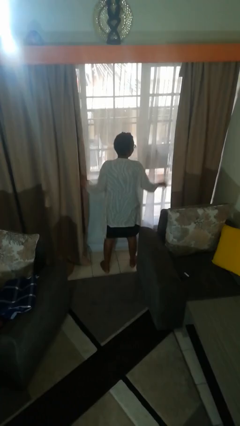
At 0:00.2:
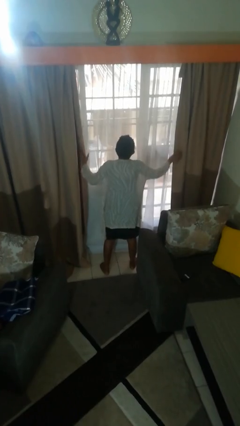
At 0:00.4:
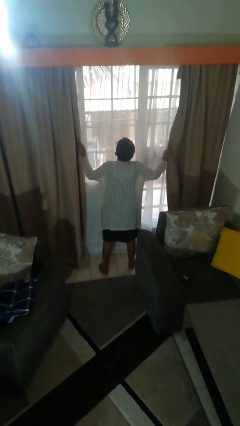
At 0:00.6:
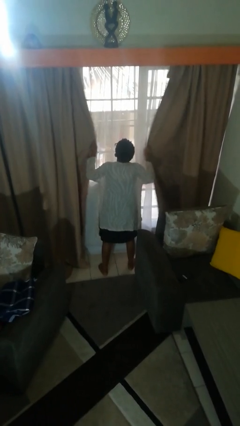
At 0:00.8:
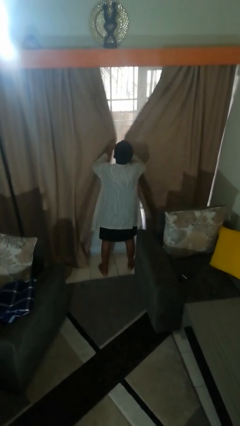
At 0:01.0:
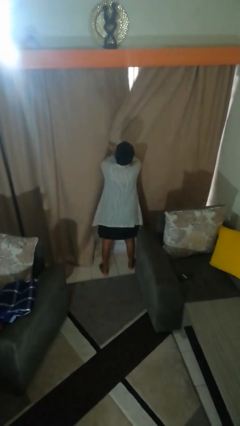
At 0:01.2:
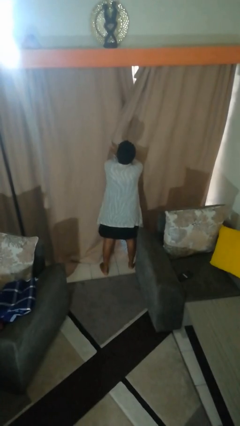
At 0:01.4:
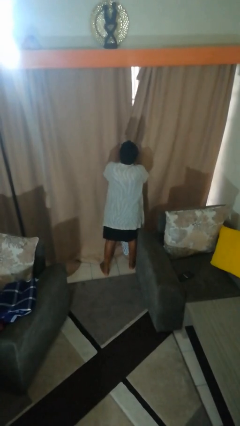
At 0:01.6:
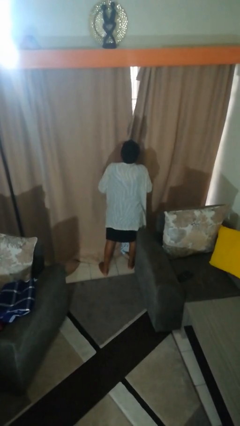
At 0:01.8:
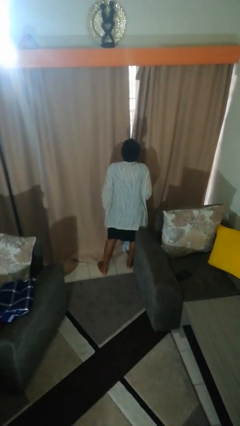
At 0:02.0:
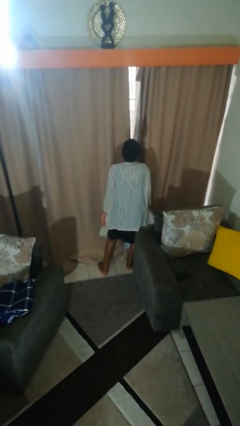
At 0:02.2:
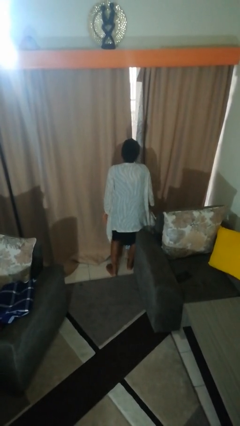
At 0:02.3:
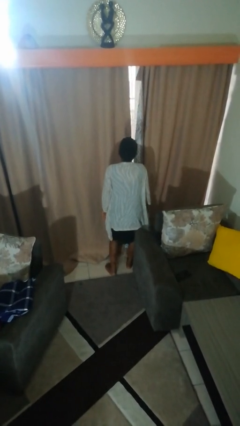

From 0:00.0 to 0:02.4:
person closes curtains

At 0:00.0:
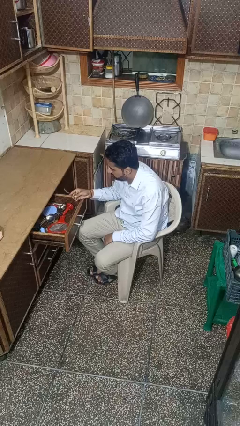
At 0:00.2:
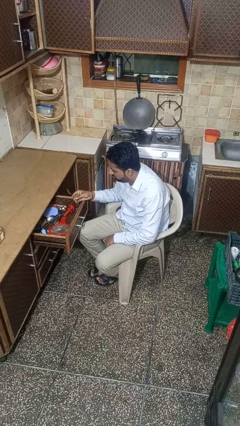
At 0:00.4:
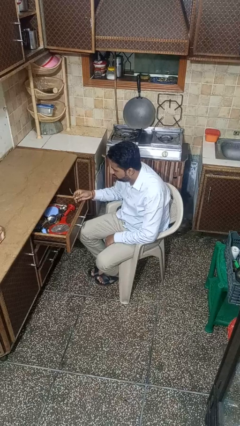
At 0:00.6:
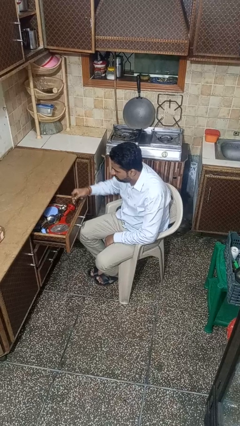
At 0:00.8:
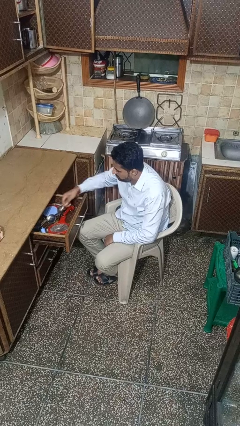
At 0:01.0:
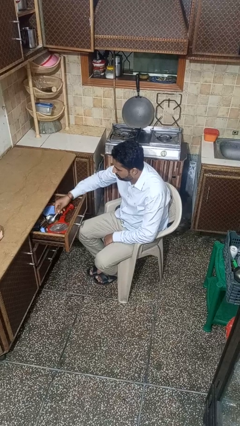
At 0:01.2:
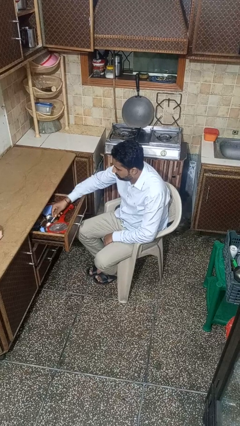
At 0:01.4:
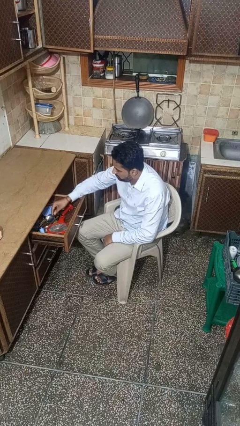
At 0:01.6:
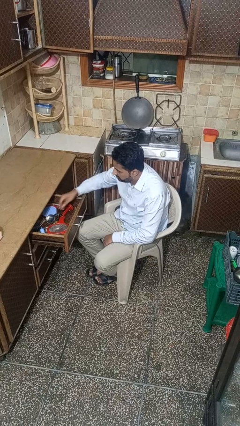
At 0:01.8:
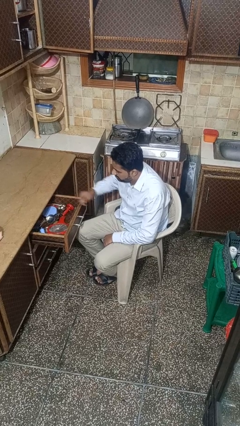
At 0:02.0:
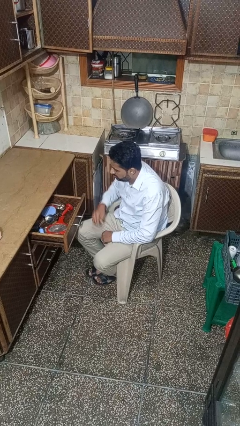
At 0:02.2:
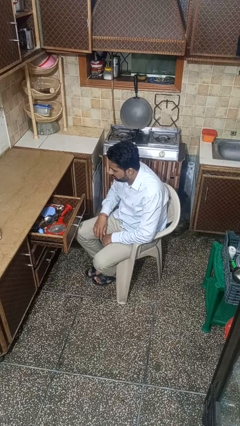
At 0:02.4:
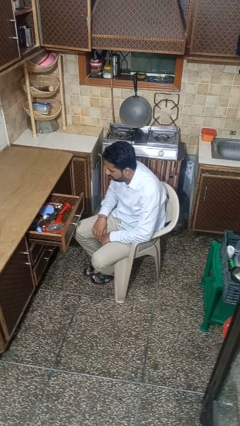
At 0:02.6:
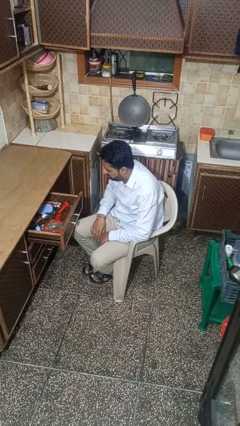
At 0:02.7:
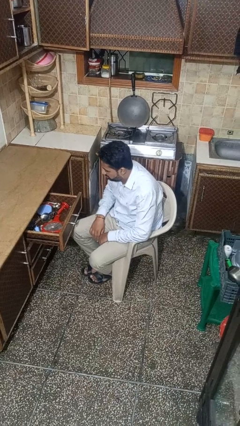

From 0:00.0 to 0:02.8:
person puts object into kitchen drawer

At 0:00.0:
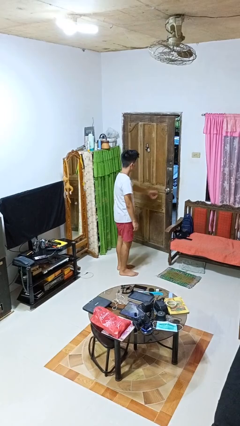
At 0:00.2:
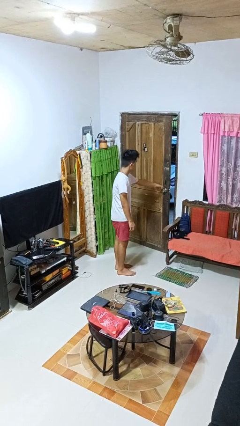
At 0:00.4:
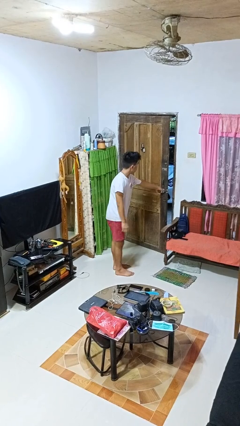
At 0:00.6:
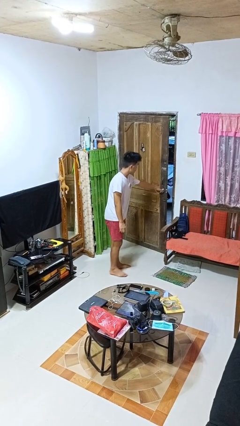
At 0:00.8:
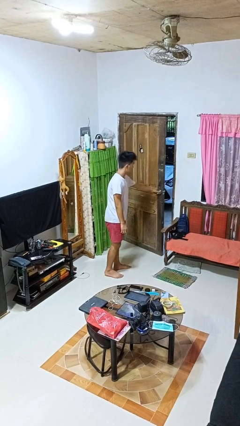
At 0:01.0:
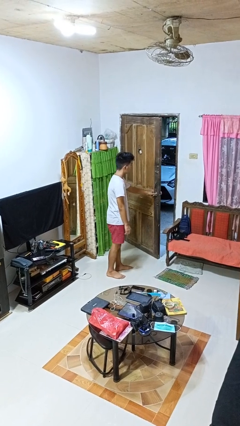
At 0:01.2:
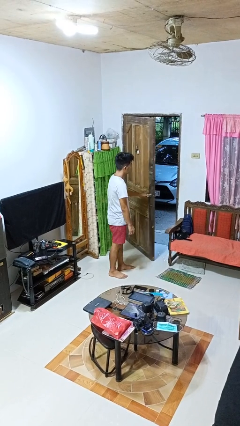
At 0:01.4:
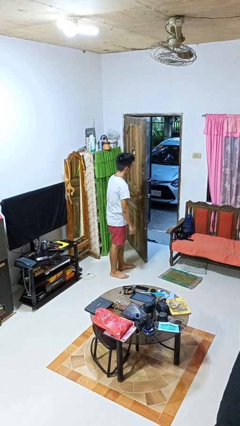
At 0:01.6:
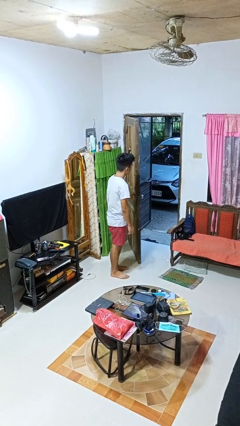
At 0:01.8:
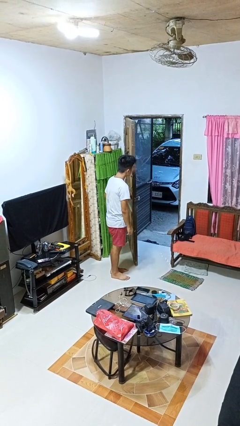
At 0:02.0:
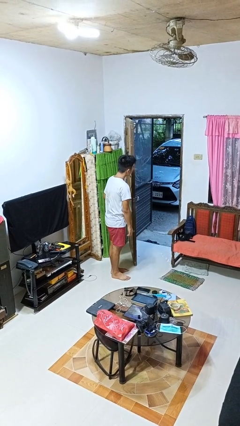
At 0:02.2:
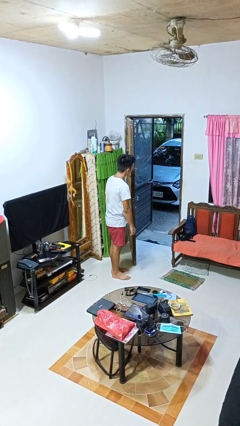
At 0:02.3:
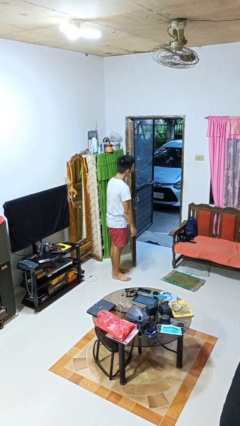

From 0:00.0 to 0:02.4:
person opens facility door

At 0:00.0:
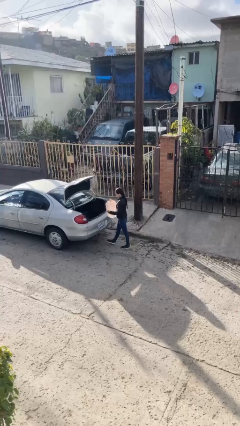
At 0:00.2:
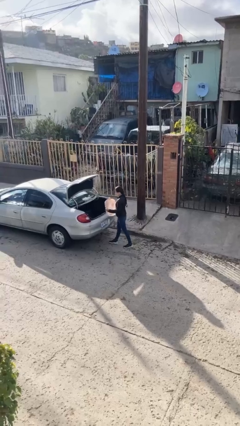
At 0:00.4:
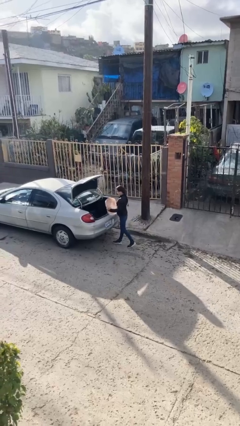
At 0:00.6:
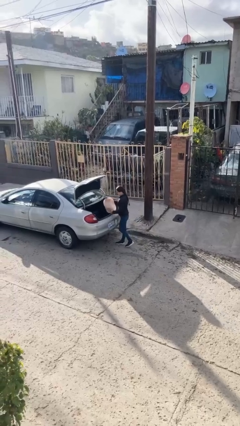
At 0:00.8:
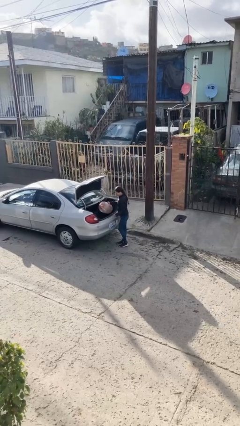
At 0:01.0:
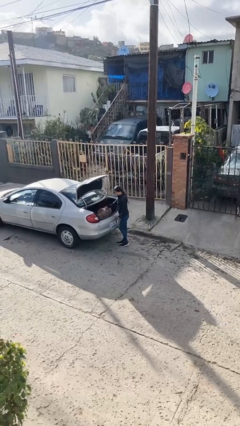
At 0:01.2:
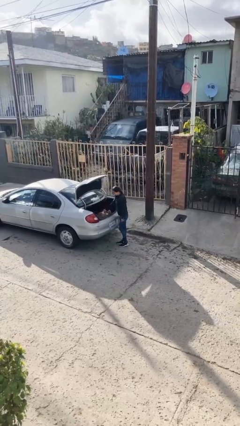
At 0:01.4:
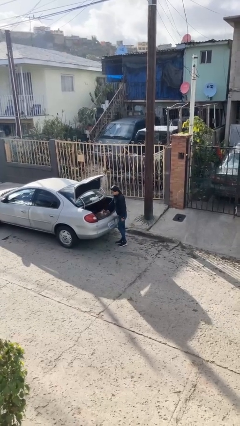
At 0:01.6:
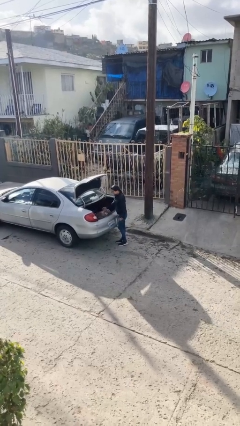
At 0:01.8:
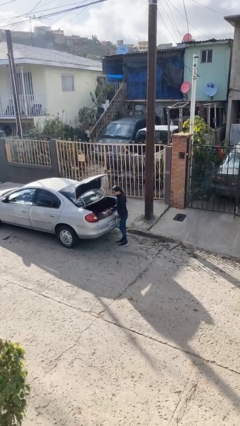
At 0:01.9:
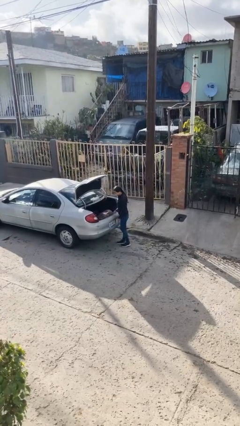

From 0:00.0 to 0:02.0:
person loads car

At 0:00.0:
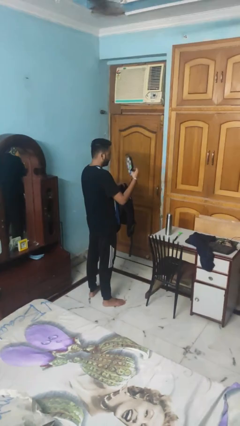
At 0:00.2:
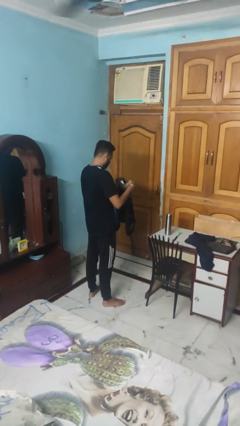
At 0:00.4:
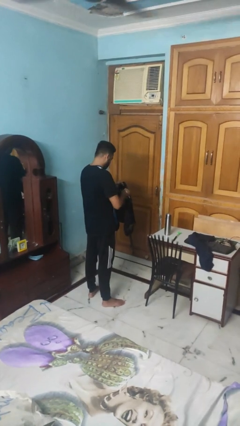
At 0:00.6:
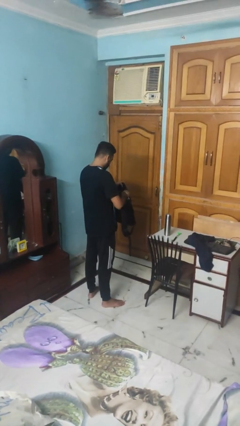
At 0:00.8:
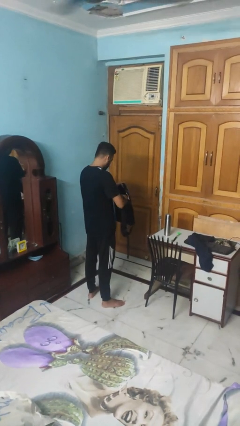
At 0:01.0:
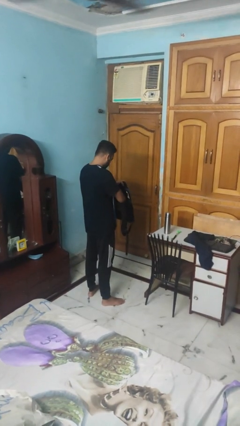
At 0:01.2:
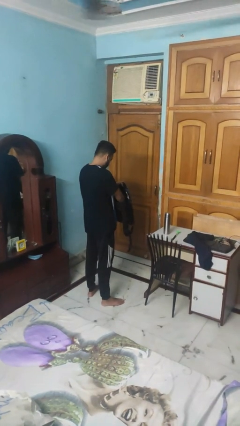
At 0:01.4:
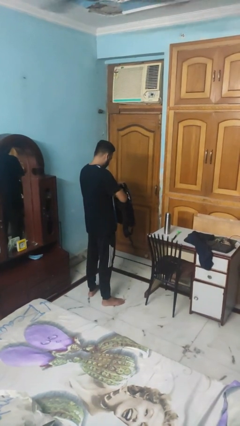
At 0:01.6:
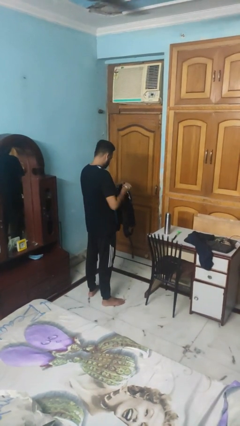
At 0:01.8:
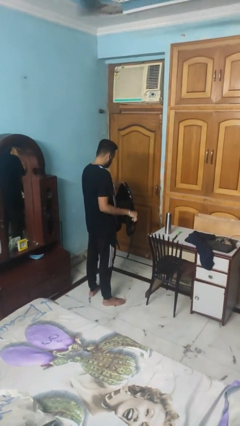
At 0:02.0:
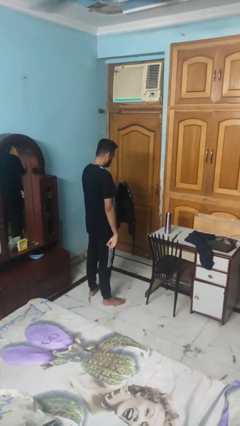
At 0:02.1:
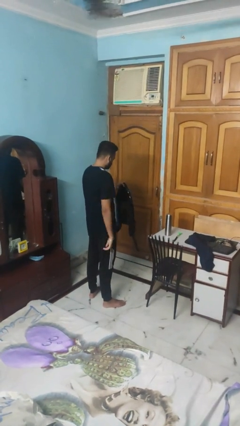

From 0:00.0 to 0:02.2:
person puts object into backpack

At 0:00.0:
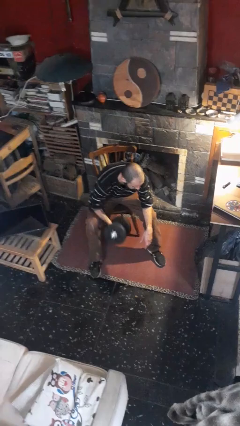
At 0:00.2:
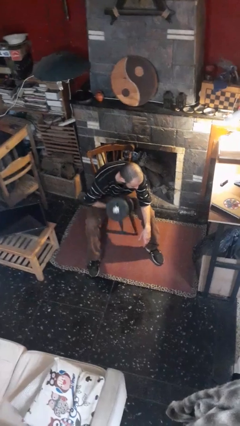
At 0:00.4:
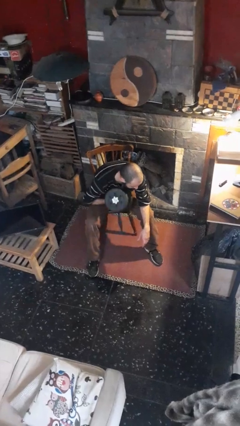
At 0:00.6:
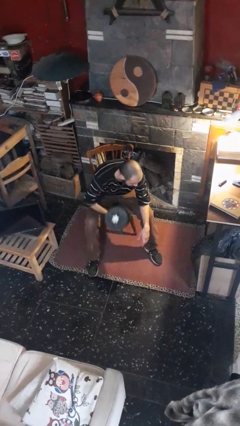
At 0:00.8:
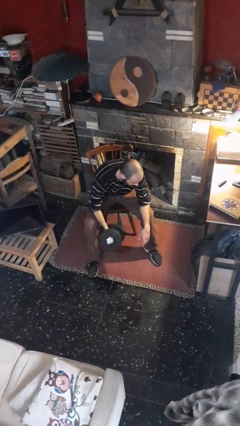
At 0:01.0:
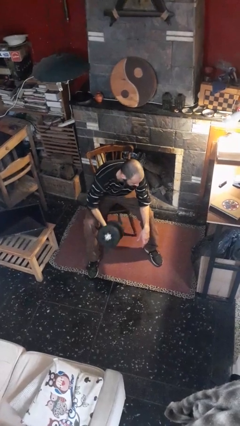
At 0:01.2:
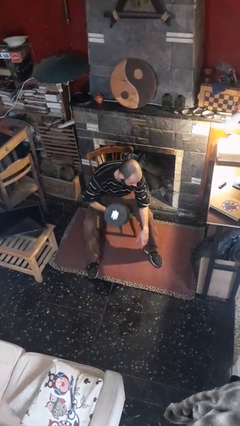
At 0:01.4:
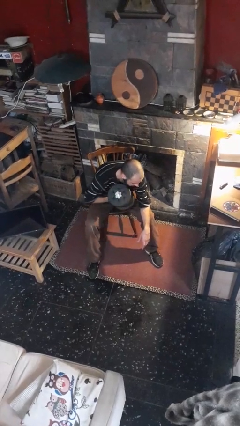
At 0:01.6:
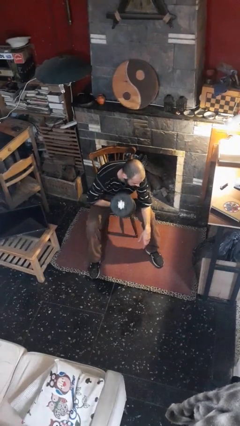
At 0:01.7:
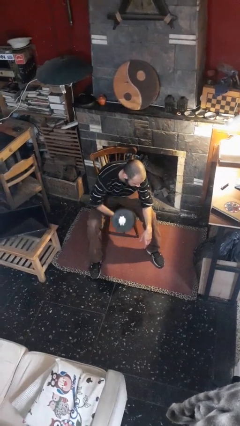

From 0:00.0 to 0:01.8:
person lifts dumbbells

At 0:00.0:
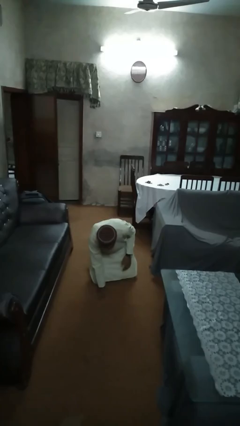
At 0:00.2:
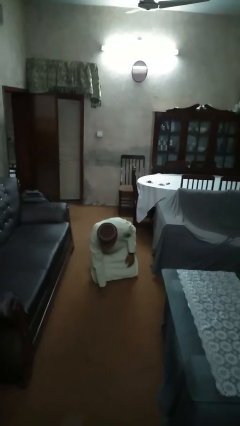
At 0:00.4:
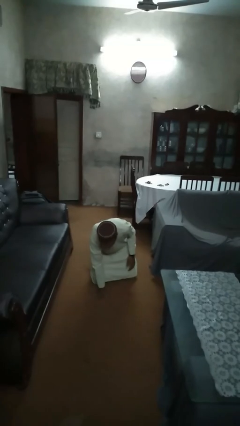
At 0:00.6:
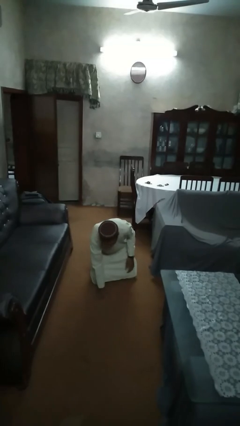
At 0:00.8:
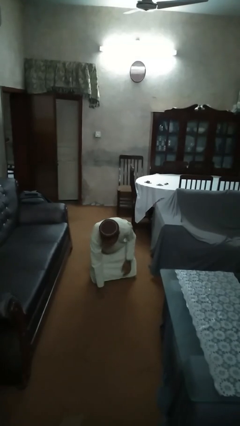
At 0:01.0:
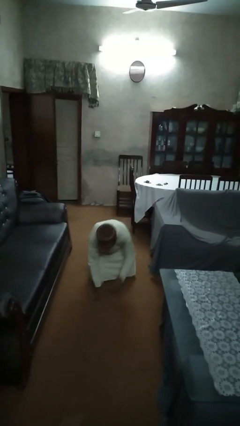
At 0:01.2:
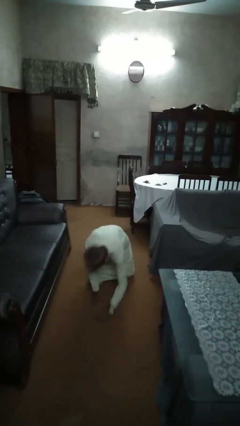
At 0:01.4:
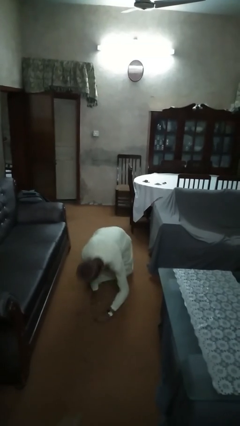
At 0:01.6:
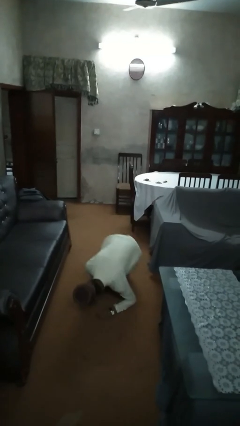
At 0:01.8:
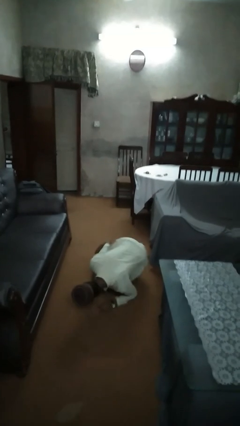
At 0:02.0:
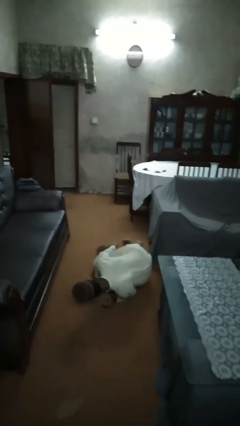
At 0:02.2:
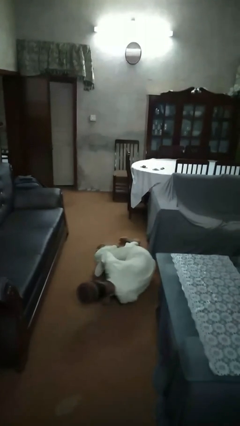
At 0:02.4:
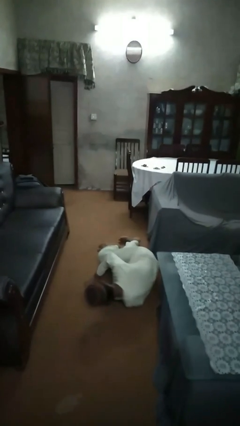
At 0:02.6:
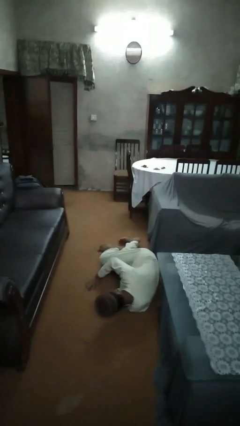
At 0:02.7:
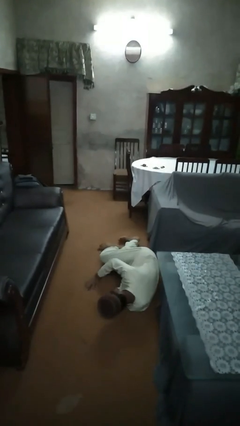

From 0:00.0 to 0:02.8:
person lies down on floor

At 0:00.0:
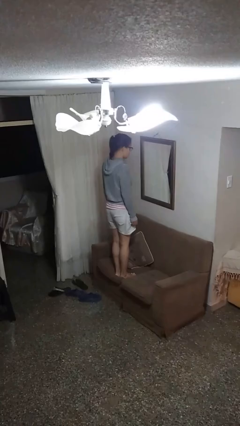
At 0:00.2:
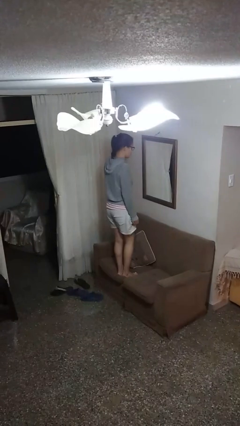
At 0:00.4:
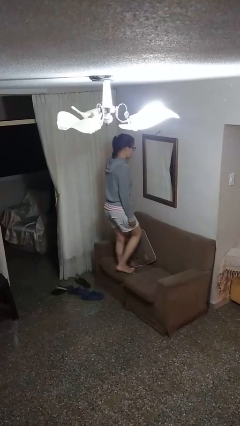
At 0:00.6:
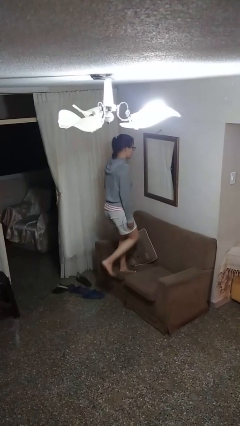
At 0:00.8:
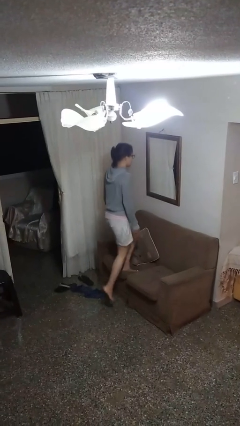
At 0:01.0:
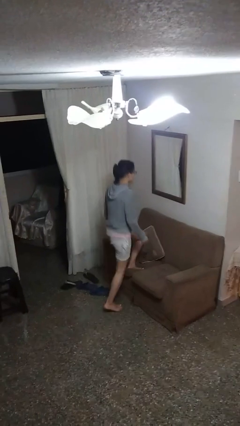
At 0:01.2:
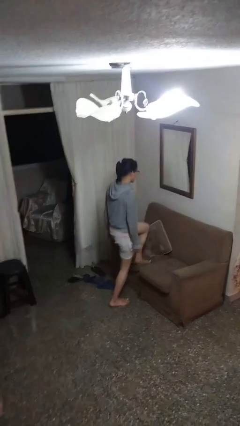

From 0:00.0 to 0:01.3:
person climbs off couch
